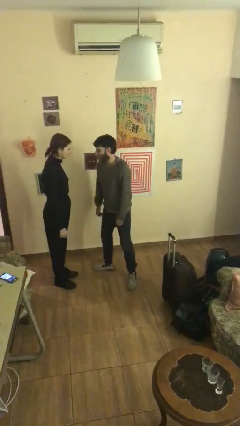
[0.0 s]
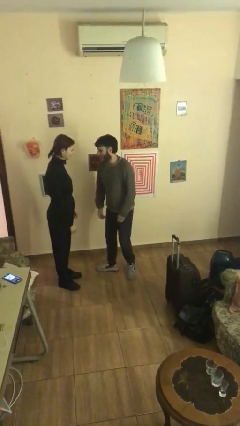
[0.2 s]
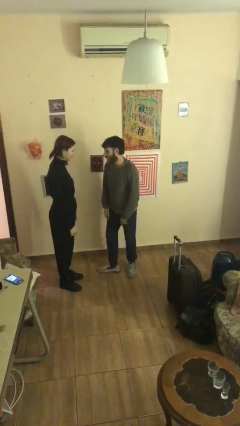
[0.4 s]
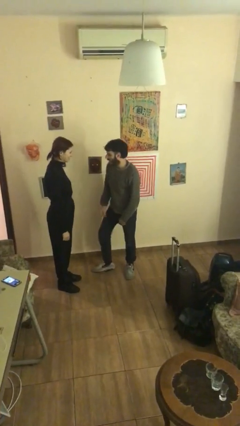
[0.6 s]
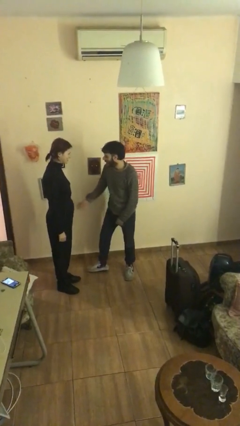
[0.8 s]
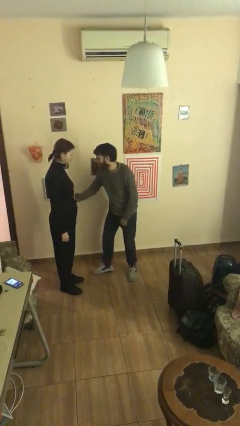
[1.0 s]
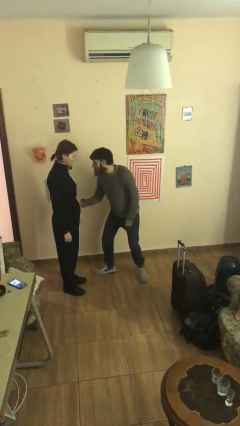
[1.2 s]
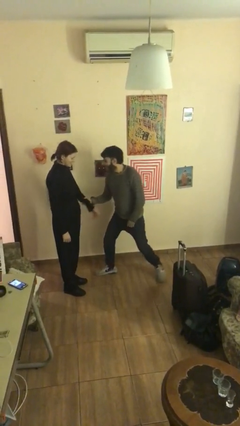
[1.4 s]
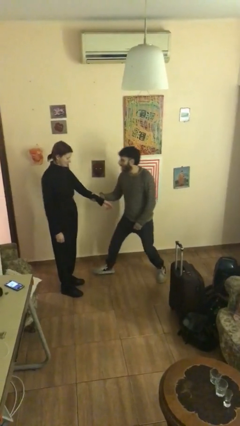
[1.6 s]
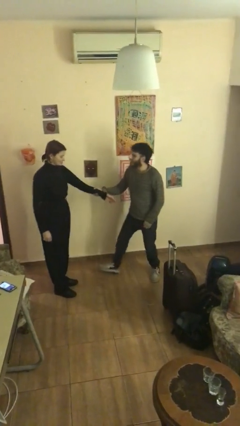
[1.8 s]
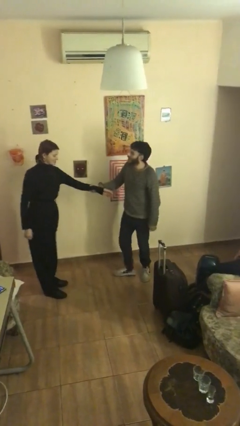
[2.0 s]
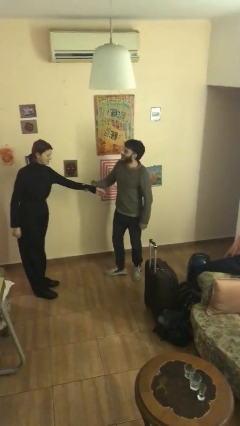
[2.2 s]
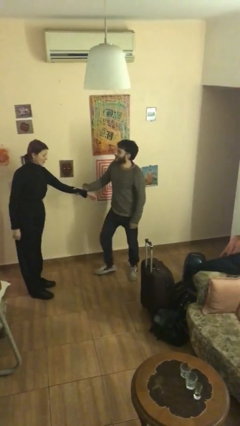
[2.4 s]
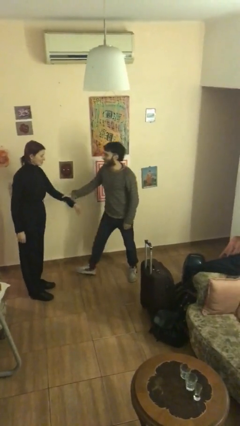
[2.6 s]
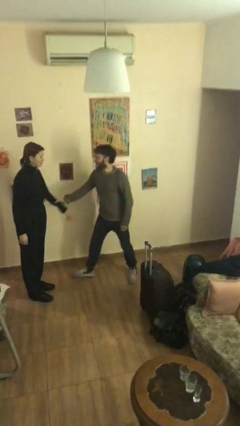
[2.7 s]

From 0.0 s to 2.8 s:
person grabs person by forearm

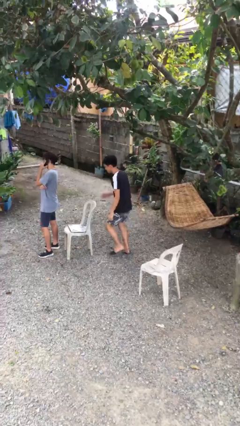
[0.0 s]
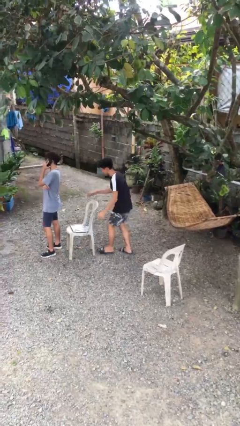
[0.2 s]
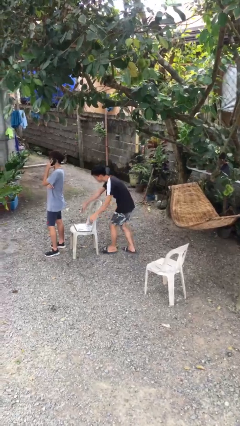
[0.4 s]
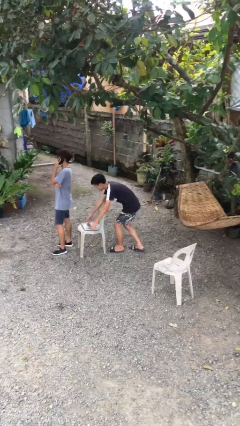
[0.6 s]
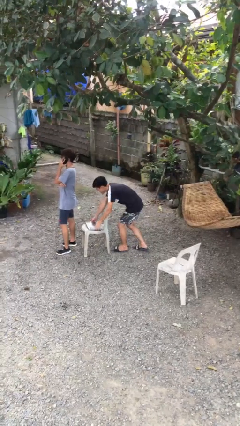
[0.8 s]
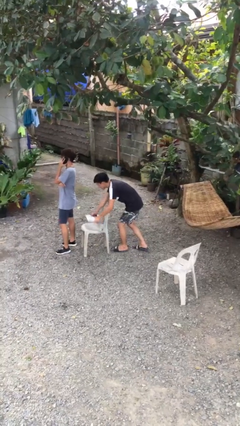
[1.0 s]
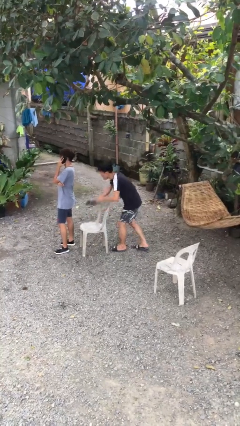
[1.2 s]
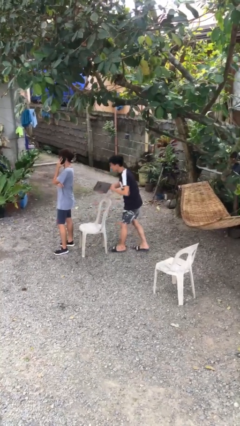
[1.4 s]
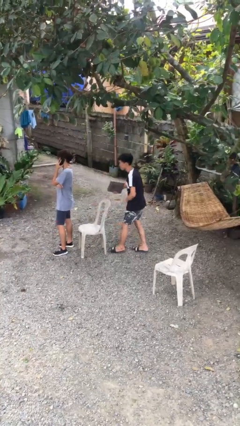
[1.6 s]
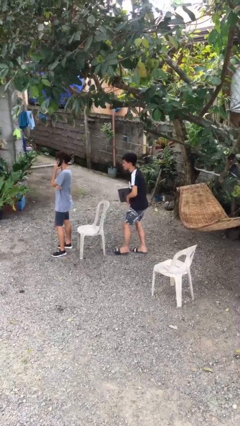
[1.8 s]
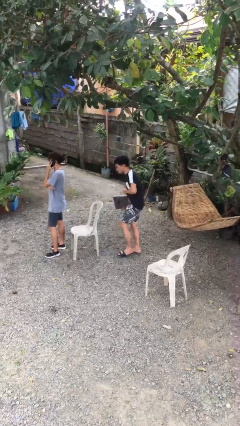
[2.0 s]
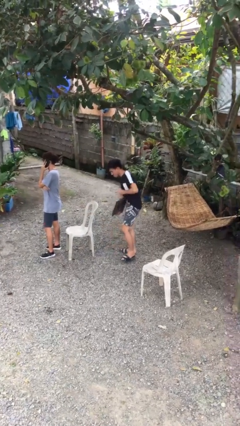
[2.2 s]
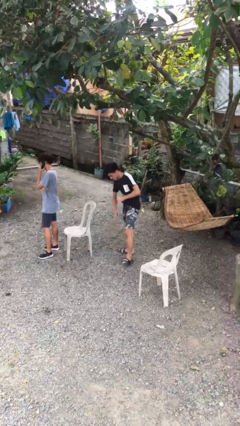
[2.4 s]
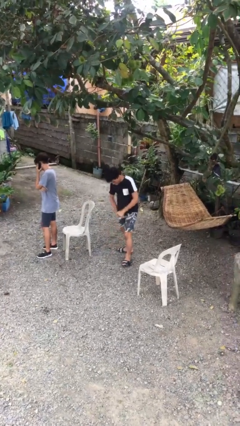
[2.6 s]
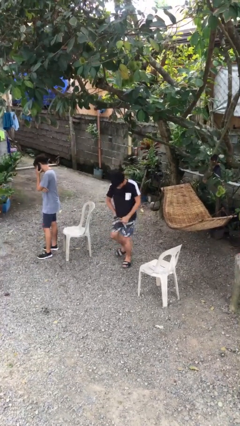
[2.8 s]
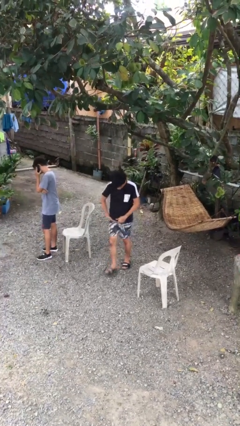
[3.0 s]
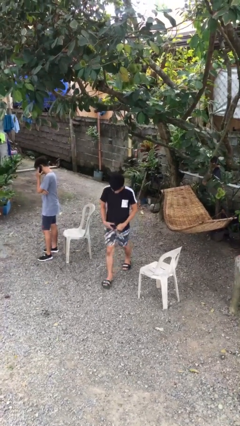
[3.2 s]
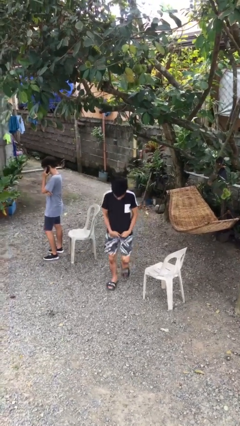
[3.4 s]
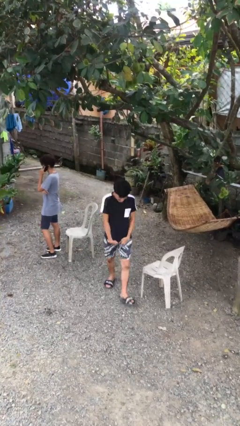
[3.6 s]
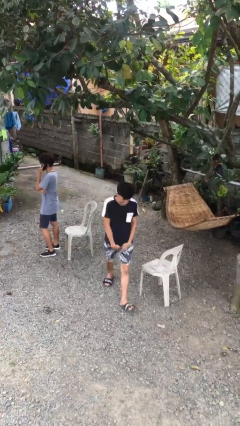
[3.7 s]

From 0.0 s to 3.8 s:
person steals object from person

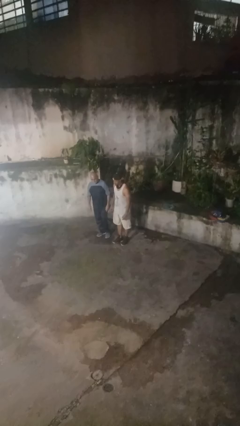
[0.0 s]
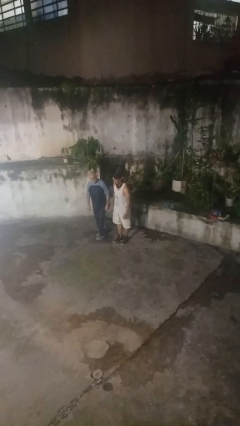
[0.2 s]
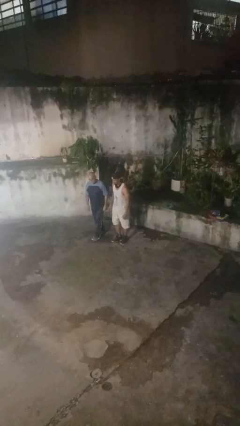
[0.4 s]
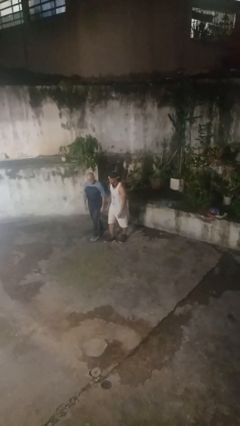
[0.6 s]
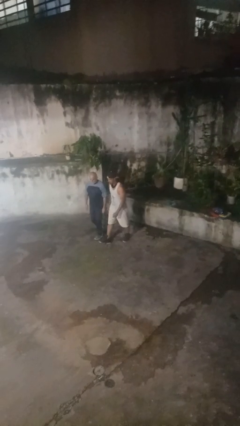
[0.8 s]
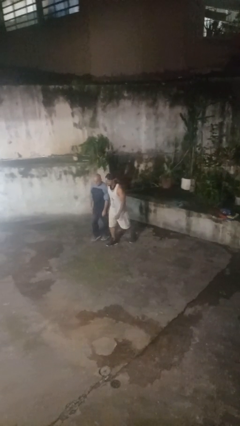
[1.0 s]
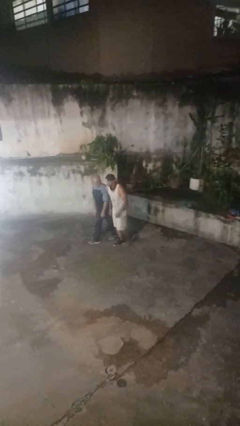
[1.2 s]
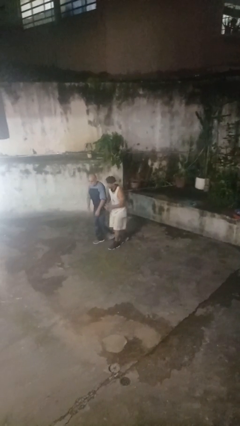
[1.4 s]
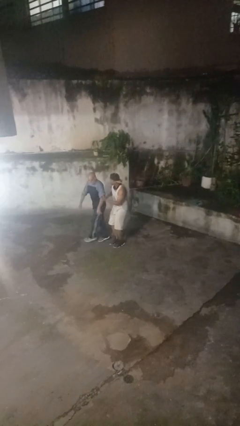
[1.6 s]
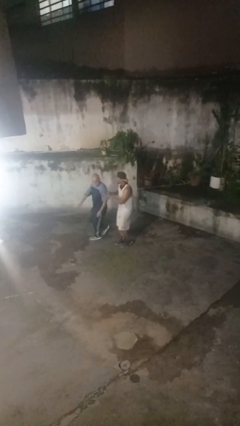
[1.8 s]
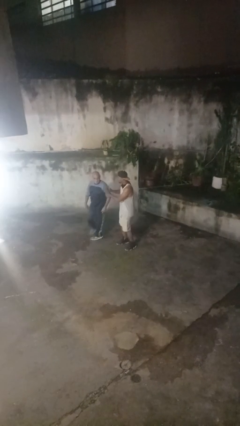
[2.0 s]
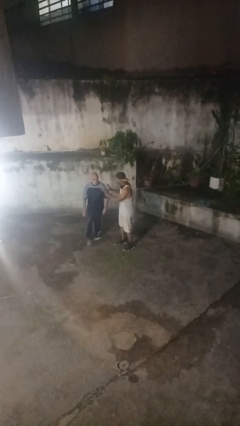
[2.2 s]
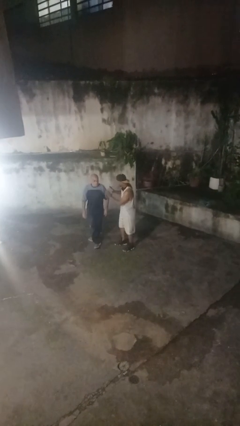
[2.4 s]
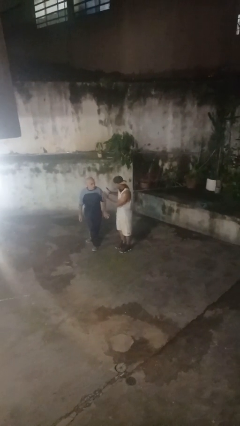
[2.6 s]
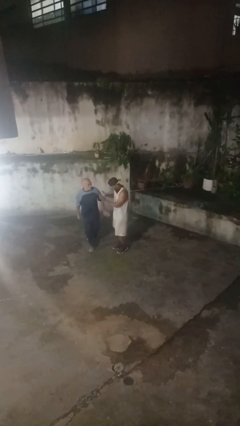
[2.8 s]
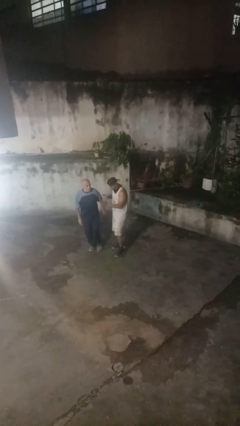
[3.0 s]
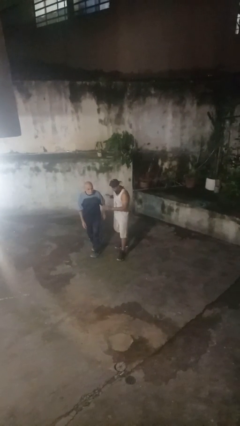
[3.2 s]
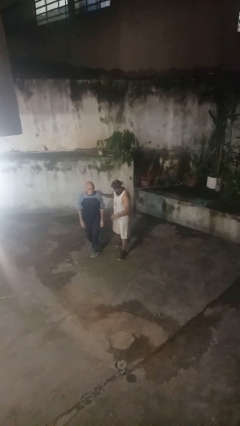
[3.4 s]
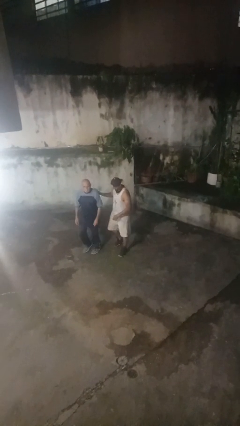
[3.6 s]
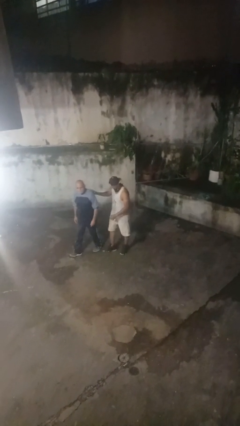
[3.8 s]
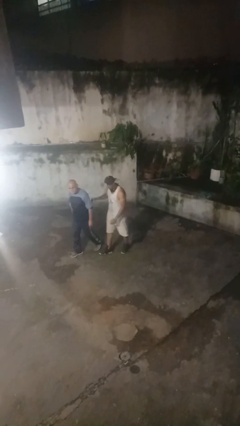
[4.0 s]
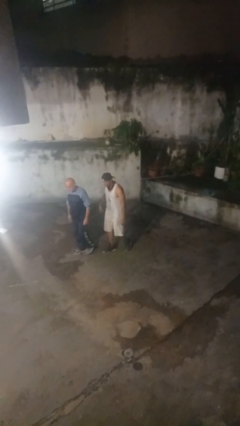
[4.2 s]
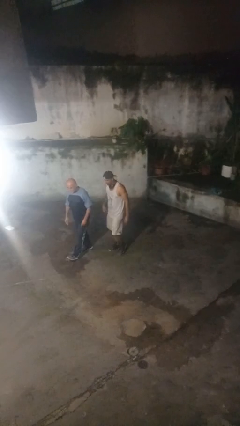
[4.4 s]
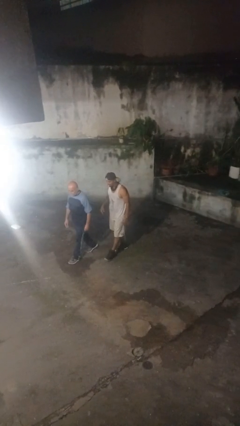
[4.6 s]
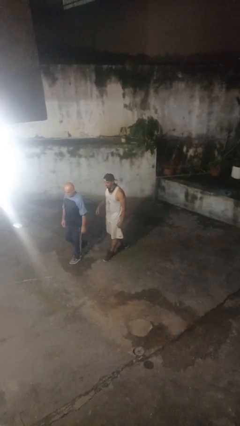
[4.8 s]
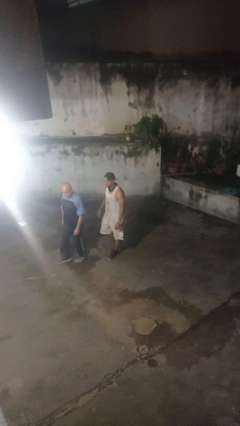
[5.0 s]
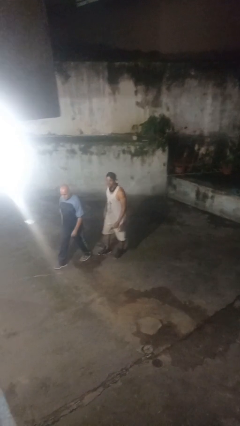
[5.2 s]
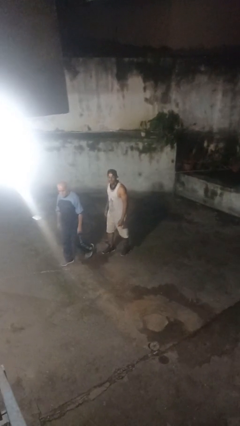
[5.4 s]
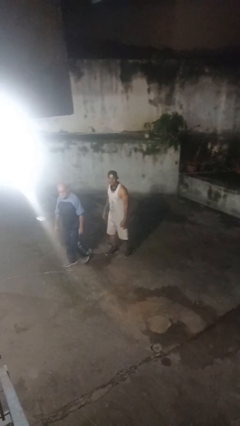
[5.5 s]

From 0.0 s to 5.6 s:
person bumps into person

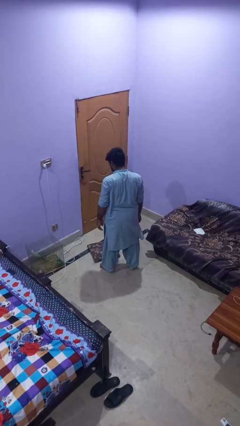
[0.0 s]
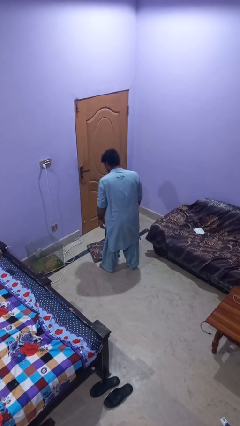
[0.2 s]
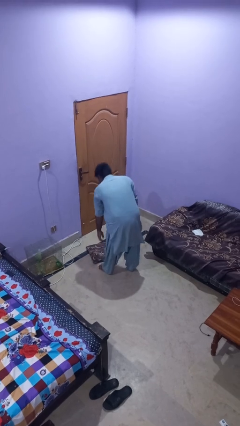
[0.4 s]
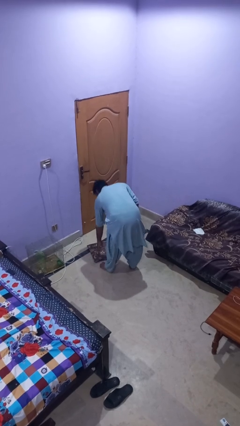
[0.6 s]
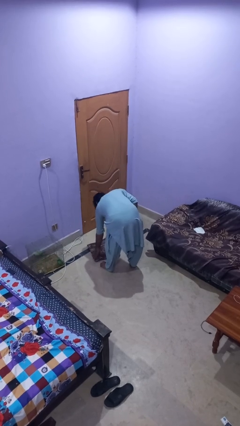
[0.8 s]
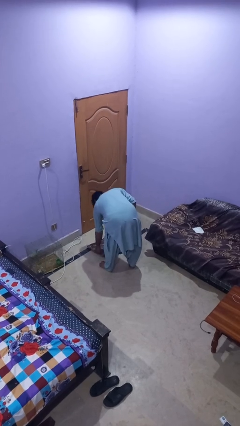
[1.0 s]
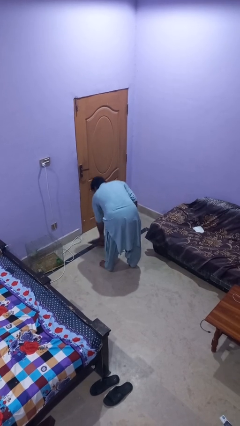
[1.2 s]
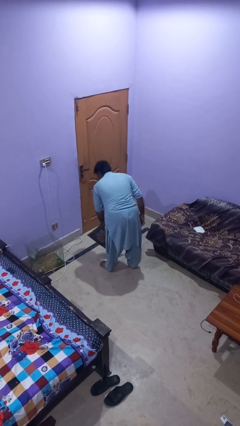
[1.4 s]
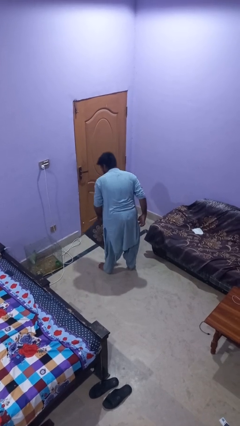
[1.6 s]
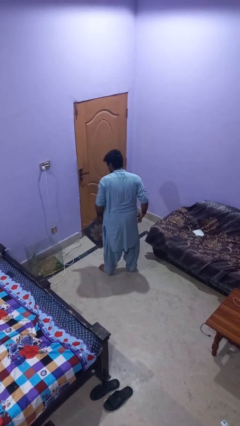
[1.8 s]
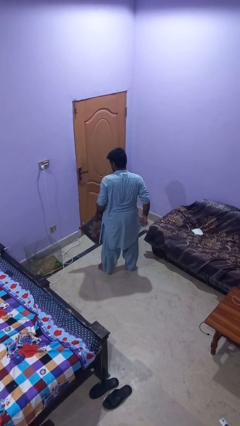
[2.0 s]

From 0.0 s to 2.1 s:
person picks up object from floor

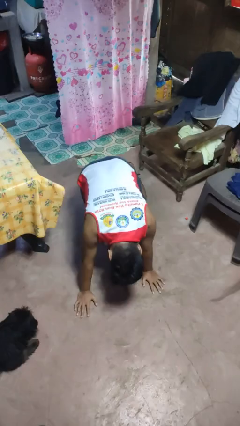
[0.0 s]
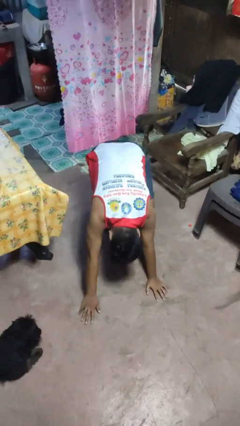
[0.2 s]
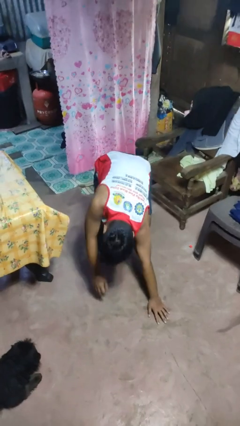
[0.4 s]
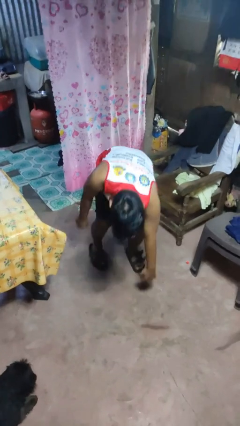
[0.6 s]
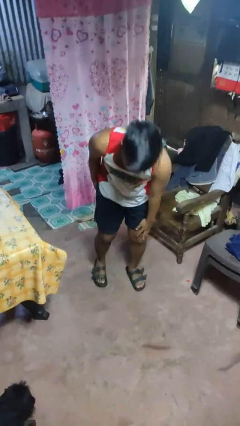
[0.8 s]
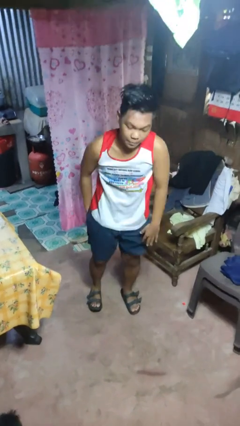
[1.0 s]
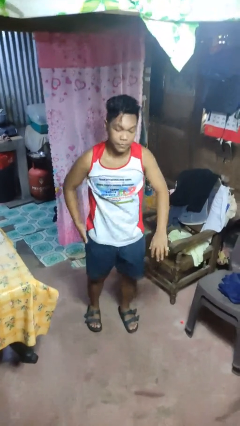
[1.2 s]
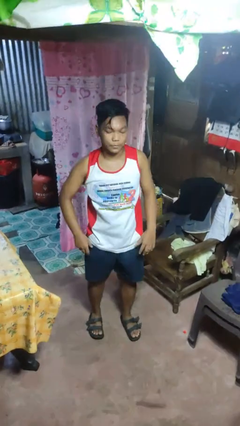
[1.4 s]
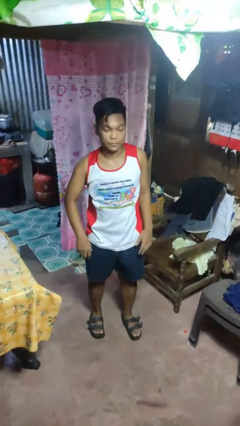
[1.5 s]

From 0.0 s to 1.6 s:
person stands up from floor

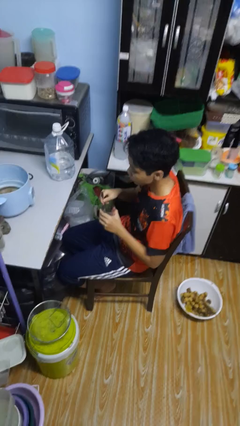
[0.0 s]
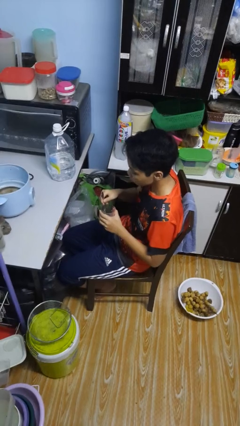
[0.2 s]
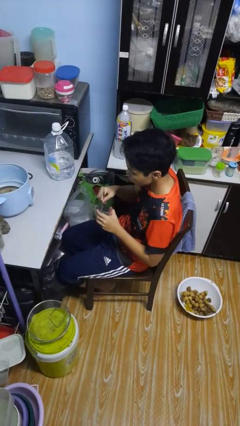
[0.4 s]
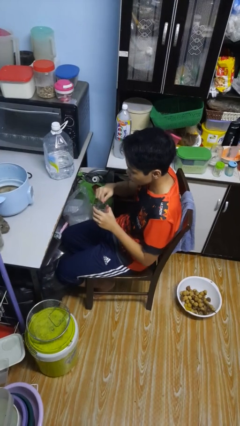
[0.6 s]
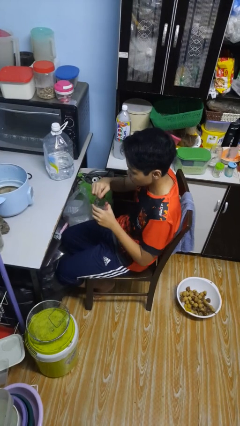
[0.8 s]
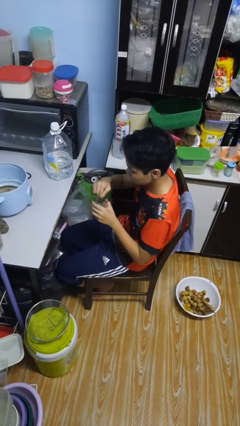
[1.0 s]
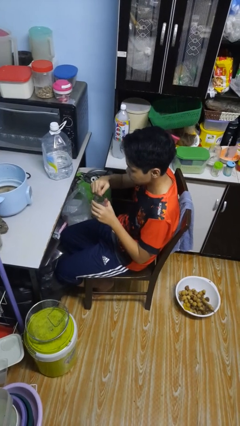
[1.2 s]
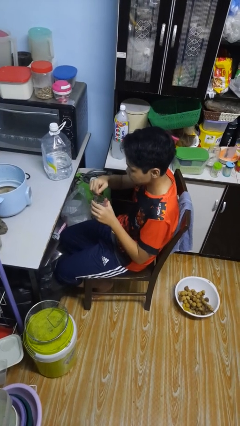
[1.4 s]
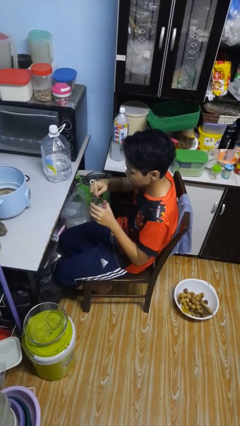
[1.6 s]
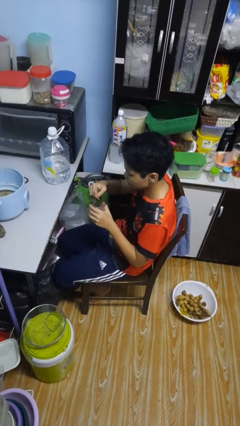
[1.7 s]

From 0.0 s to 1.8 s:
person stirs mug
